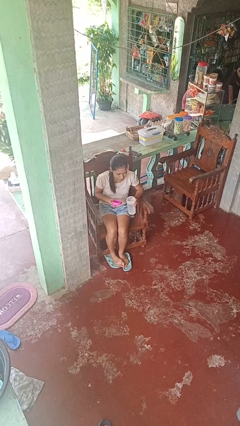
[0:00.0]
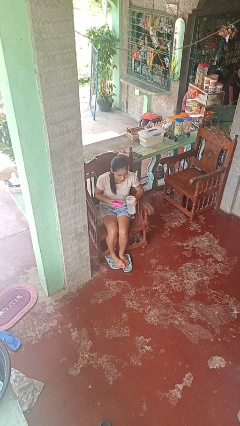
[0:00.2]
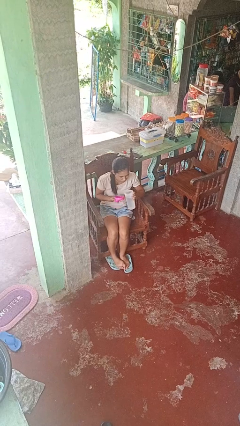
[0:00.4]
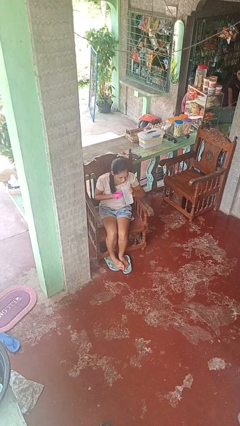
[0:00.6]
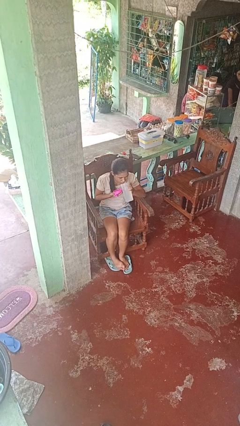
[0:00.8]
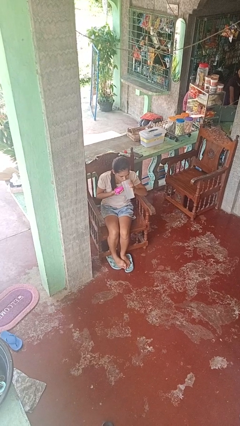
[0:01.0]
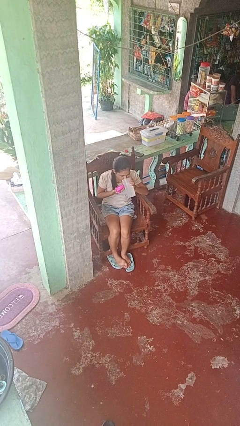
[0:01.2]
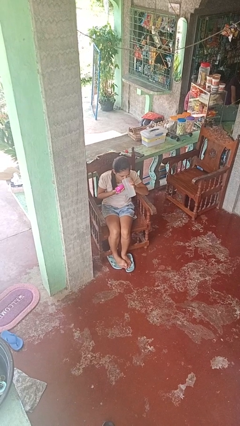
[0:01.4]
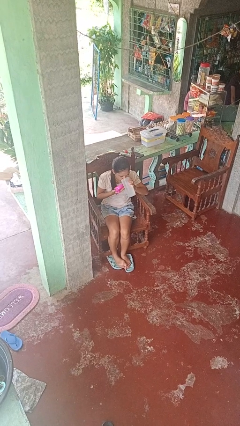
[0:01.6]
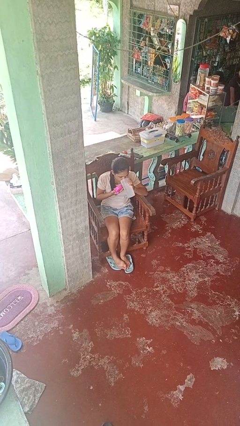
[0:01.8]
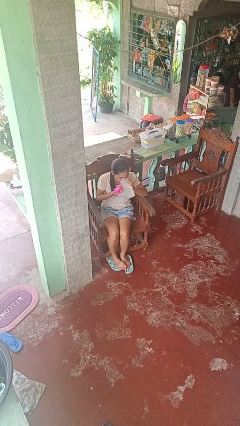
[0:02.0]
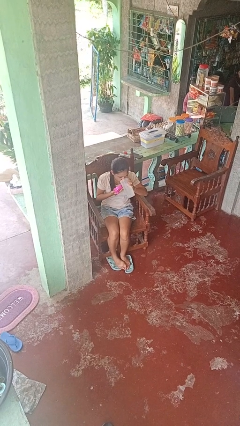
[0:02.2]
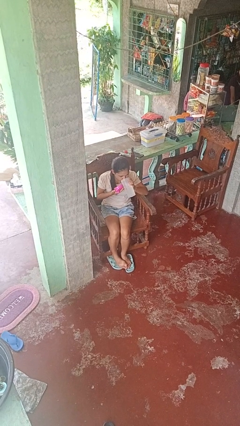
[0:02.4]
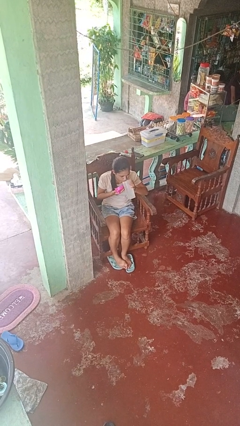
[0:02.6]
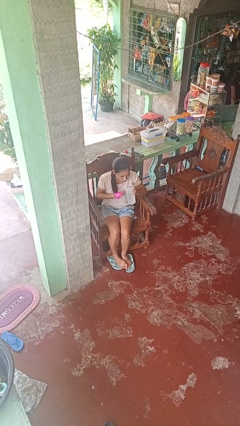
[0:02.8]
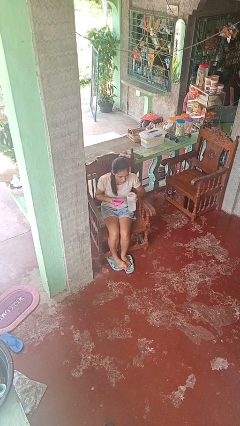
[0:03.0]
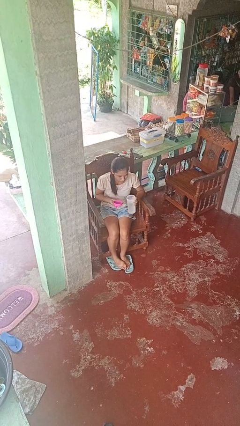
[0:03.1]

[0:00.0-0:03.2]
person drinks from bottle

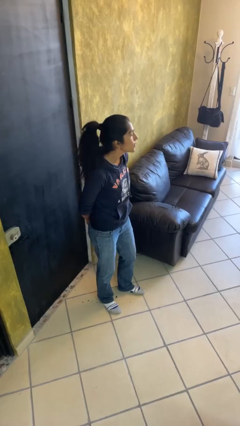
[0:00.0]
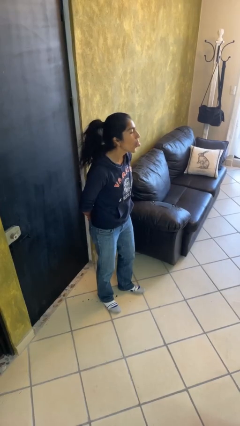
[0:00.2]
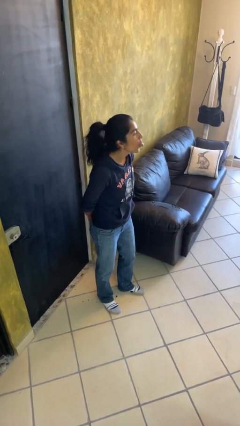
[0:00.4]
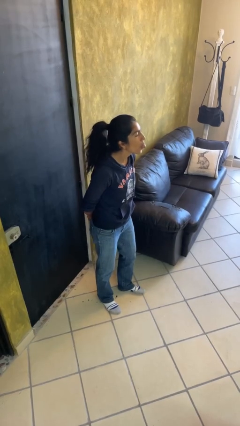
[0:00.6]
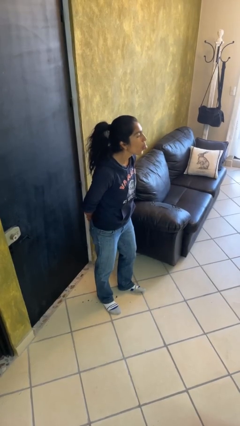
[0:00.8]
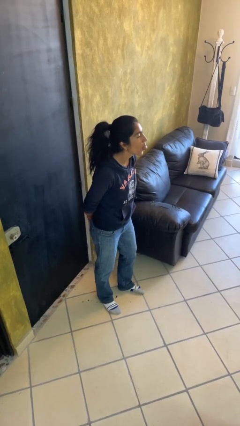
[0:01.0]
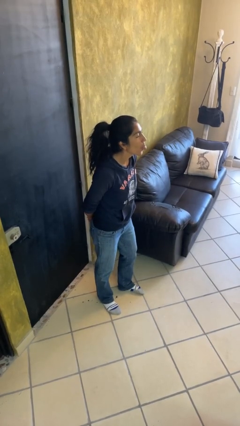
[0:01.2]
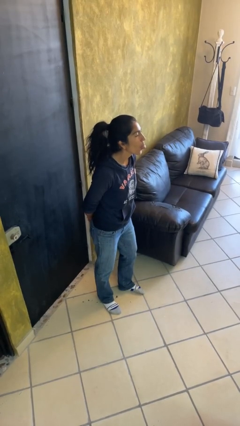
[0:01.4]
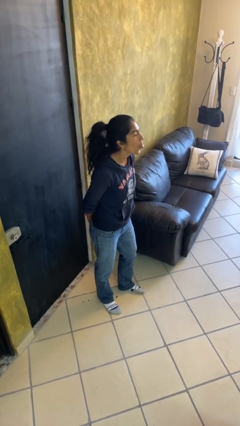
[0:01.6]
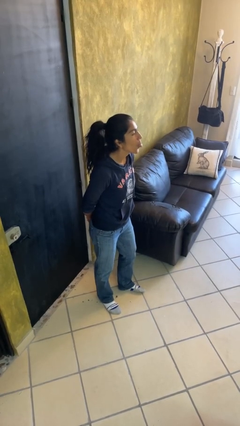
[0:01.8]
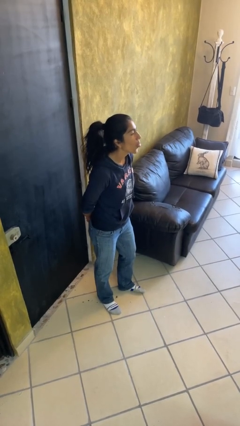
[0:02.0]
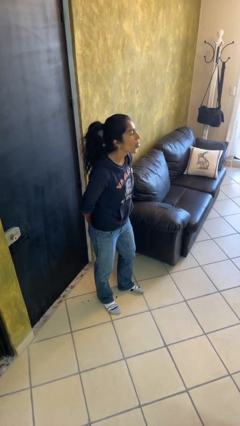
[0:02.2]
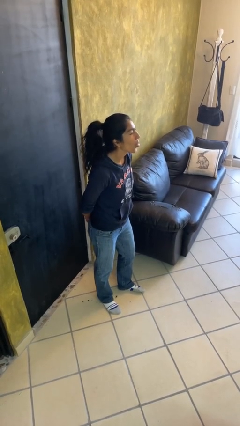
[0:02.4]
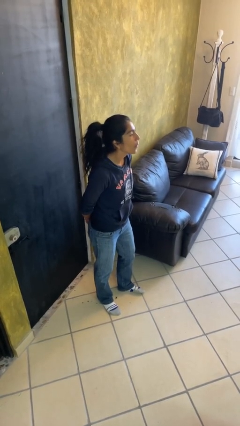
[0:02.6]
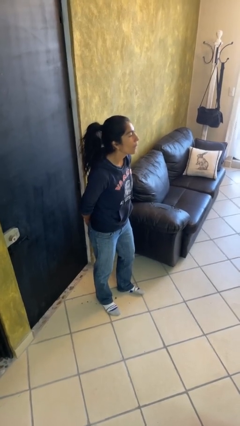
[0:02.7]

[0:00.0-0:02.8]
person sticks out tongue

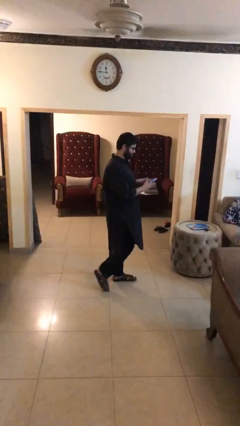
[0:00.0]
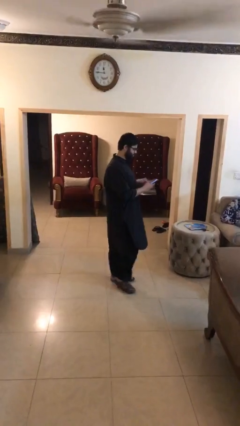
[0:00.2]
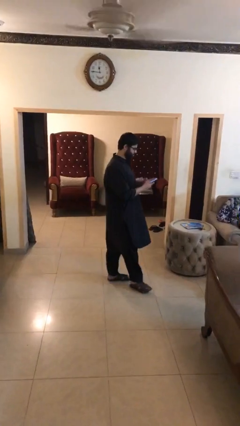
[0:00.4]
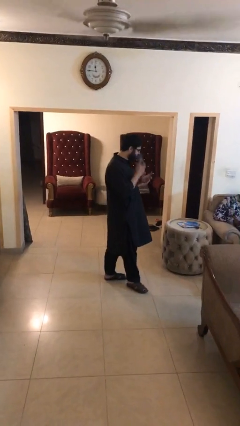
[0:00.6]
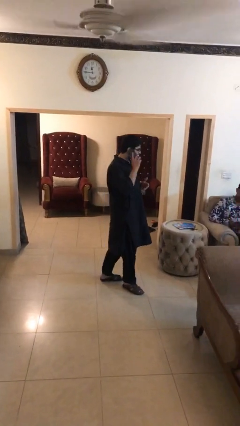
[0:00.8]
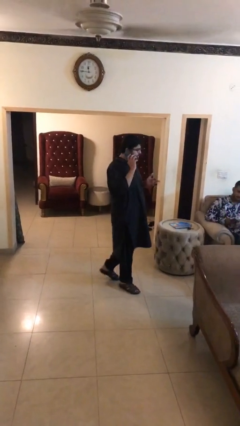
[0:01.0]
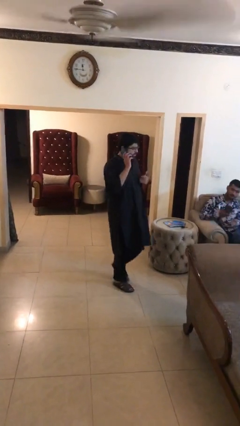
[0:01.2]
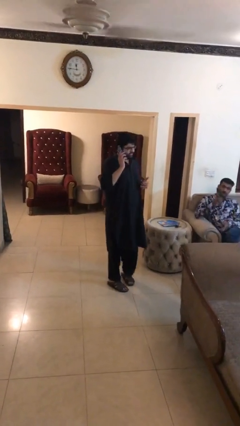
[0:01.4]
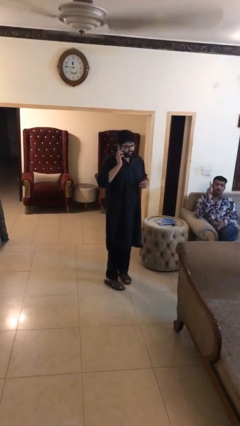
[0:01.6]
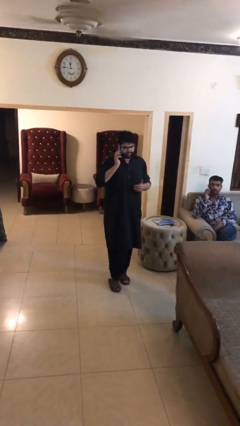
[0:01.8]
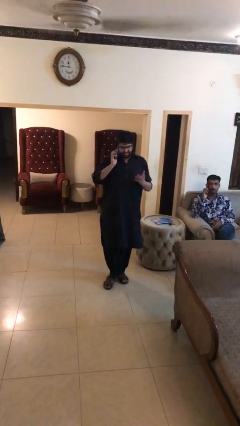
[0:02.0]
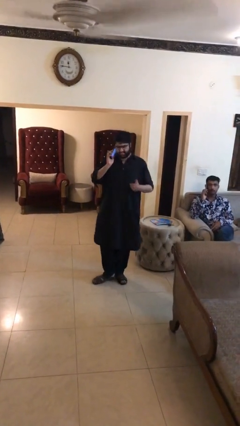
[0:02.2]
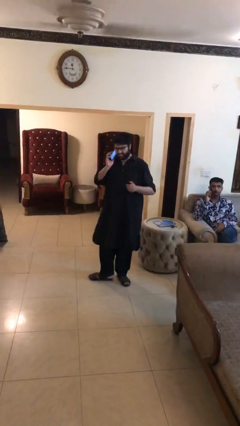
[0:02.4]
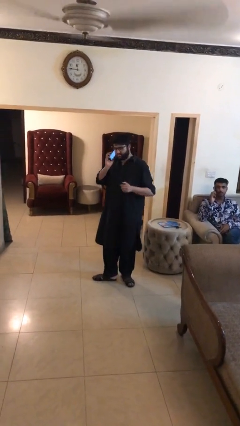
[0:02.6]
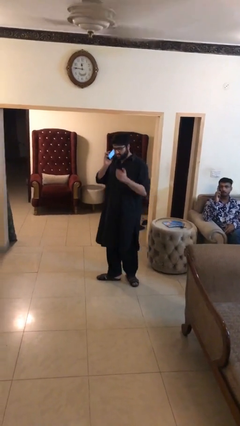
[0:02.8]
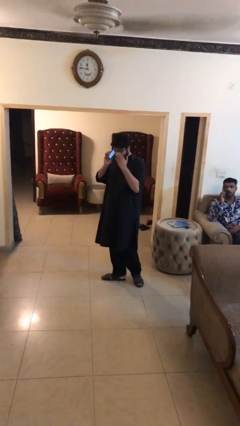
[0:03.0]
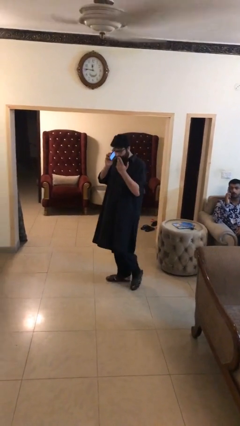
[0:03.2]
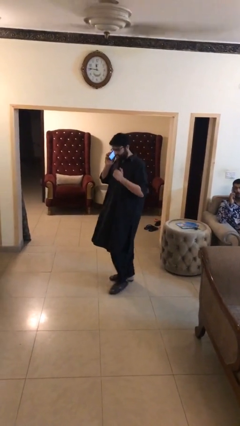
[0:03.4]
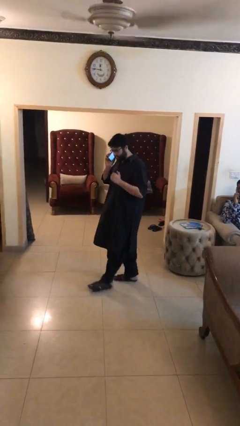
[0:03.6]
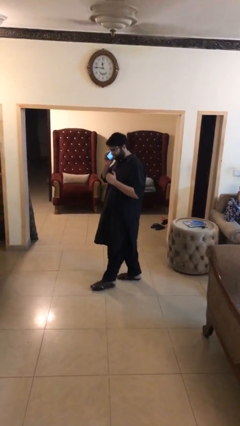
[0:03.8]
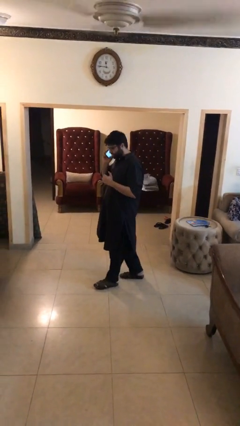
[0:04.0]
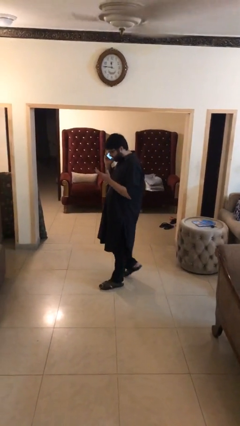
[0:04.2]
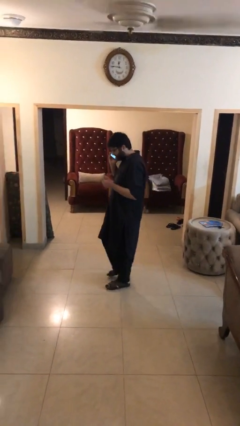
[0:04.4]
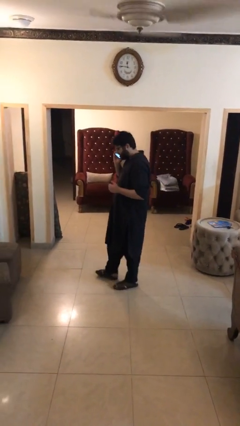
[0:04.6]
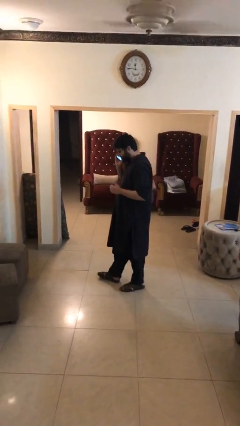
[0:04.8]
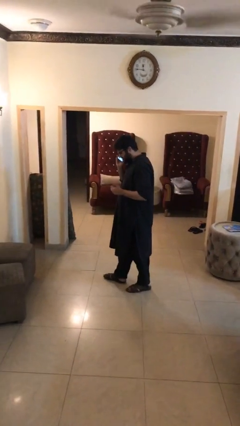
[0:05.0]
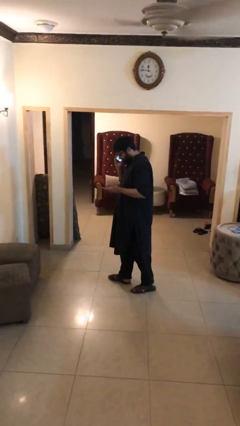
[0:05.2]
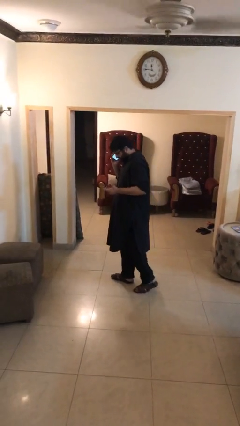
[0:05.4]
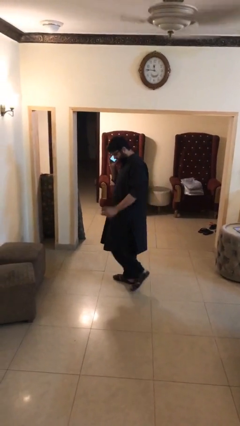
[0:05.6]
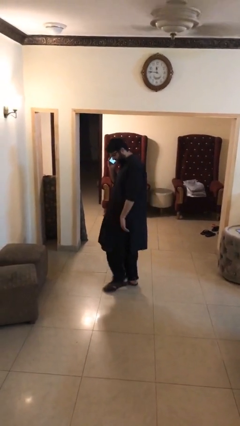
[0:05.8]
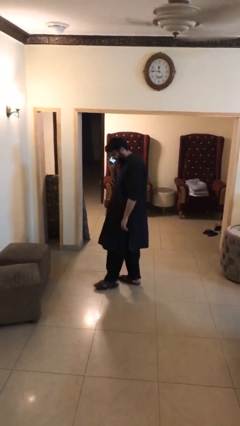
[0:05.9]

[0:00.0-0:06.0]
person talks on phone

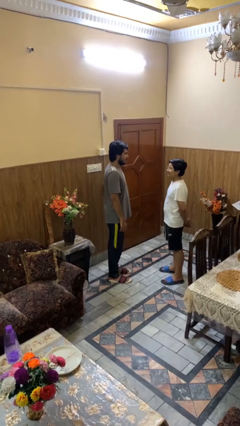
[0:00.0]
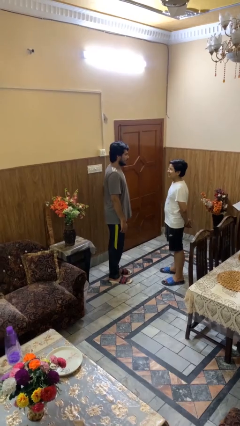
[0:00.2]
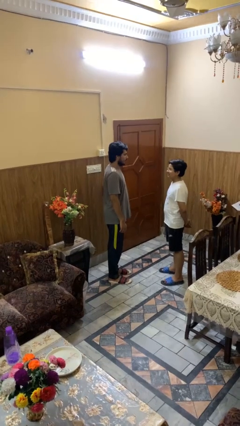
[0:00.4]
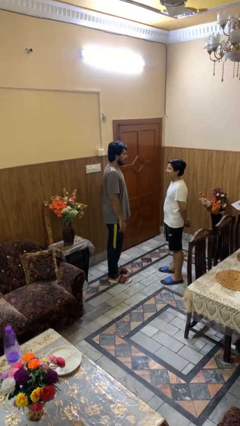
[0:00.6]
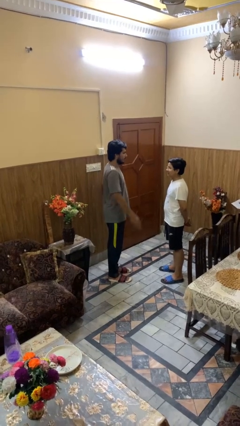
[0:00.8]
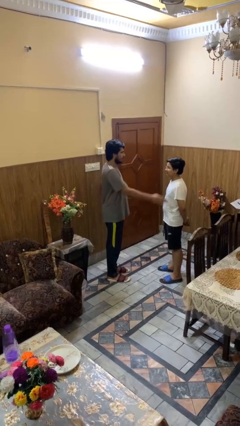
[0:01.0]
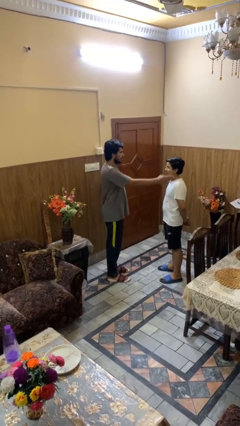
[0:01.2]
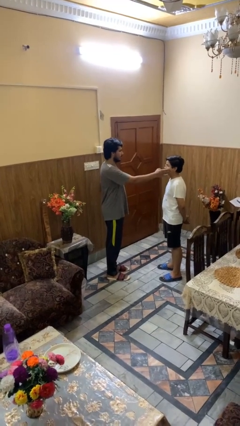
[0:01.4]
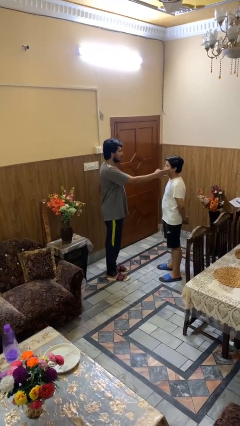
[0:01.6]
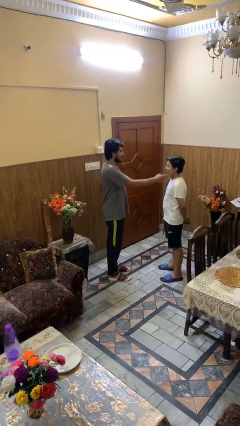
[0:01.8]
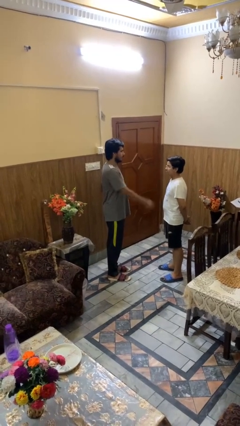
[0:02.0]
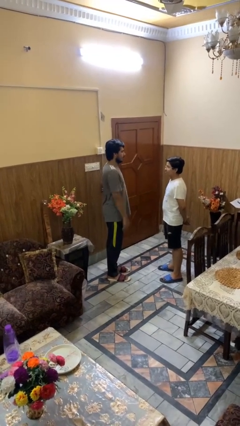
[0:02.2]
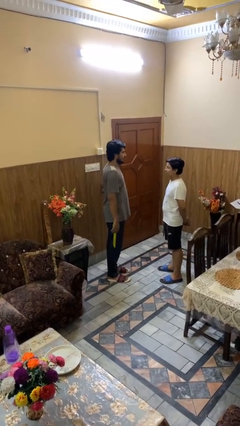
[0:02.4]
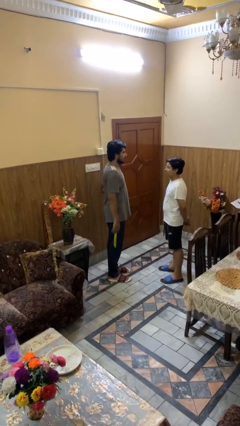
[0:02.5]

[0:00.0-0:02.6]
person touches face of person

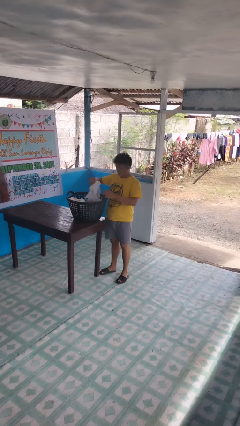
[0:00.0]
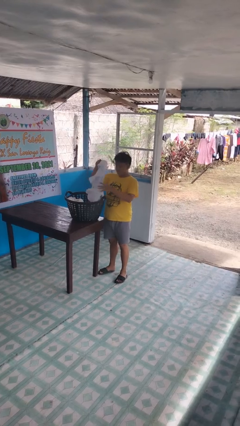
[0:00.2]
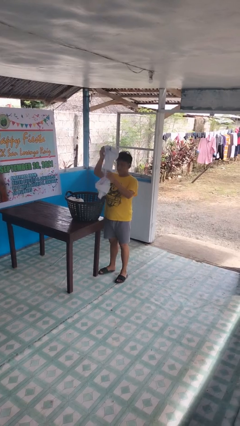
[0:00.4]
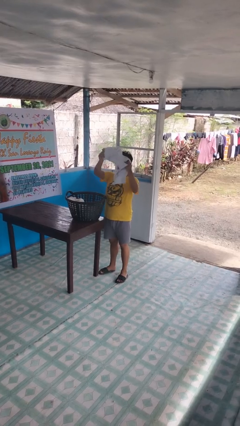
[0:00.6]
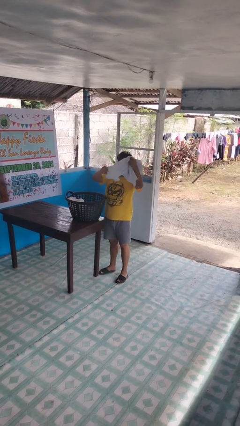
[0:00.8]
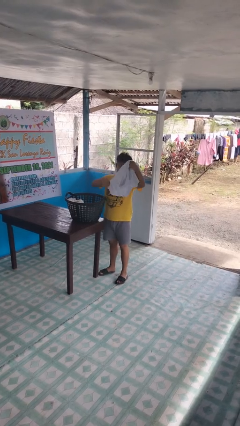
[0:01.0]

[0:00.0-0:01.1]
person takes object from basket

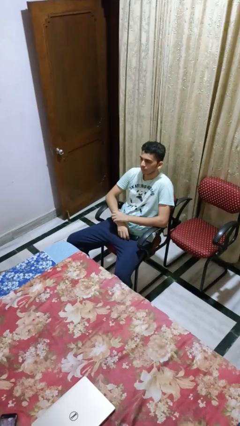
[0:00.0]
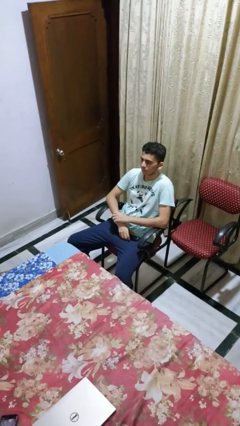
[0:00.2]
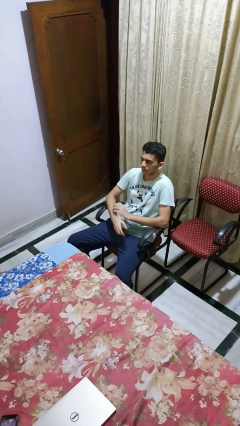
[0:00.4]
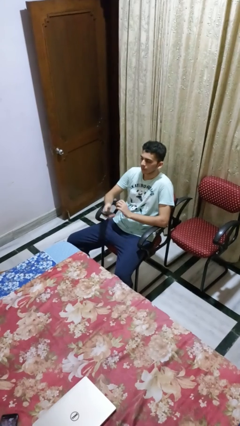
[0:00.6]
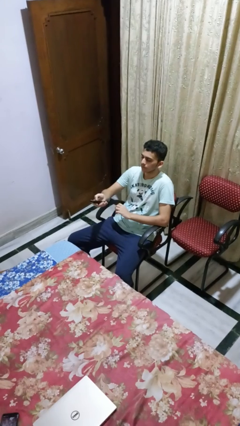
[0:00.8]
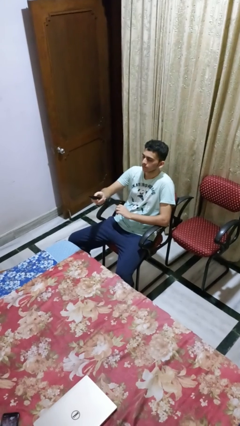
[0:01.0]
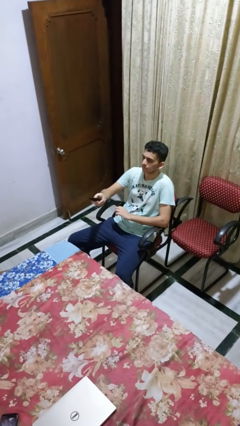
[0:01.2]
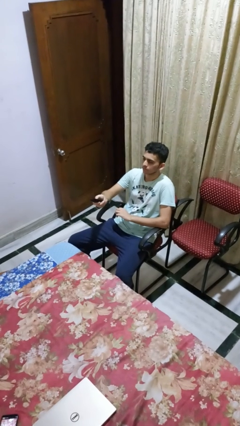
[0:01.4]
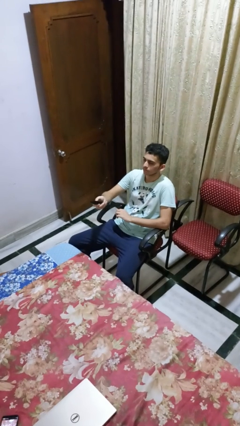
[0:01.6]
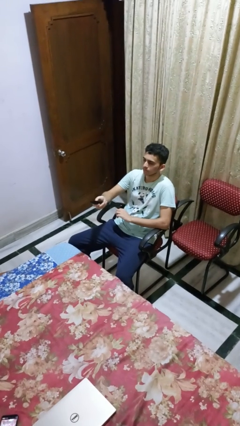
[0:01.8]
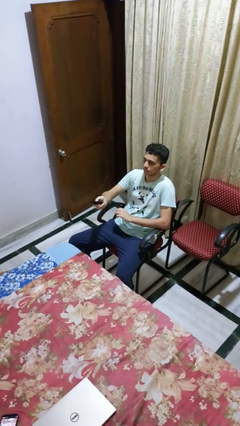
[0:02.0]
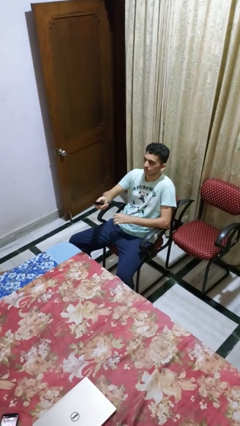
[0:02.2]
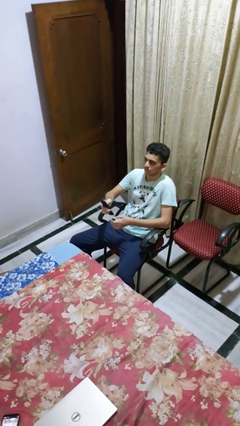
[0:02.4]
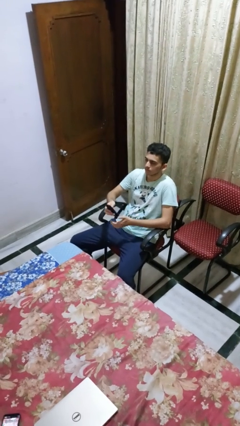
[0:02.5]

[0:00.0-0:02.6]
person uses television remote
